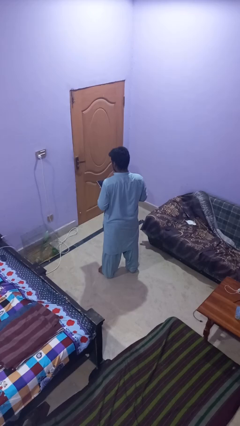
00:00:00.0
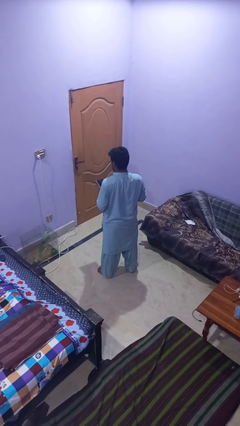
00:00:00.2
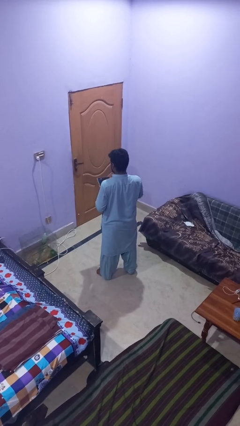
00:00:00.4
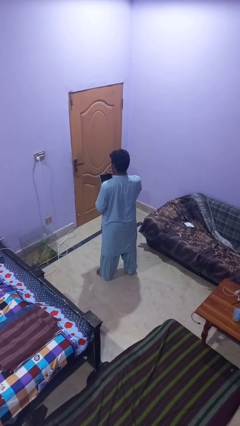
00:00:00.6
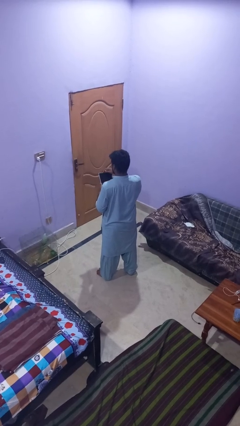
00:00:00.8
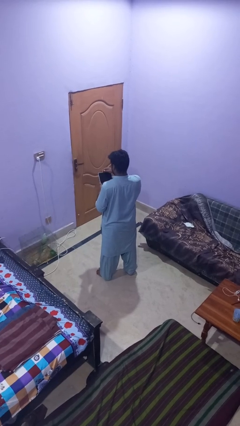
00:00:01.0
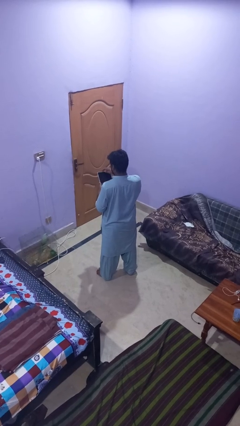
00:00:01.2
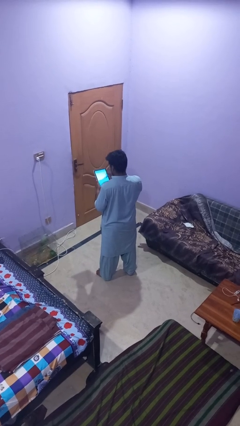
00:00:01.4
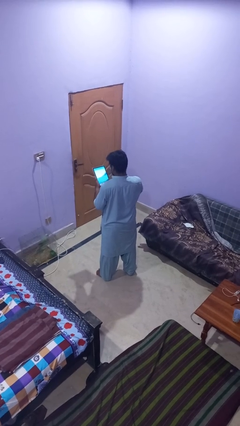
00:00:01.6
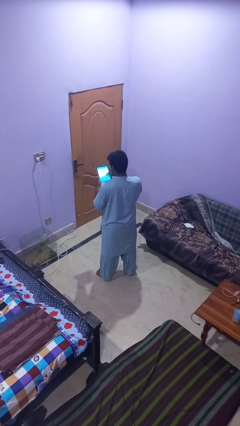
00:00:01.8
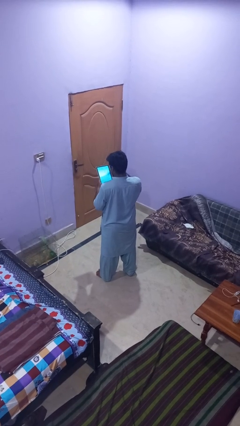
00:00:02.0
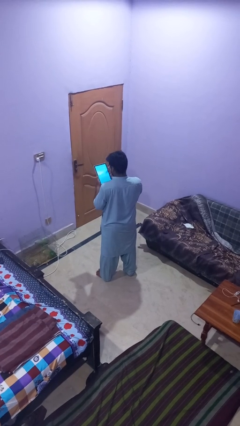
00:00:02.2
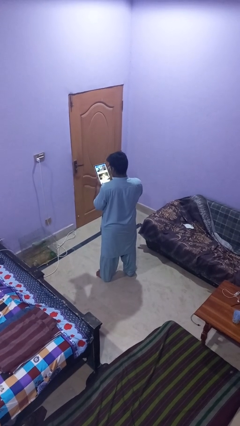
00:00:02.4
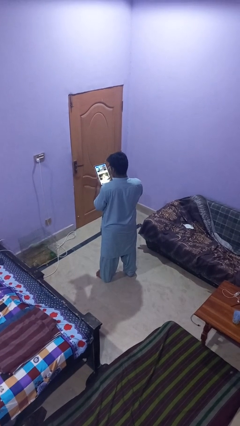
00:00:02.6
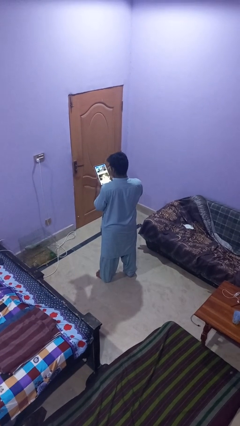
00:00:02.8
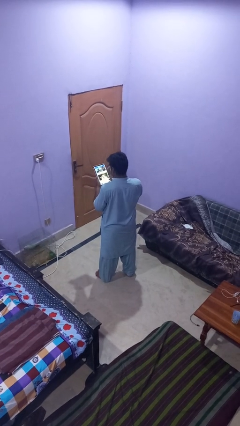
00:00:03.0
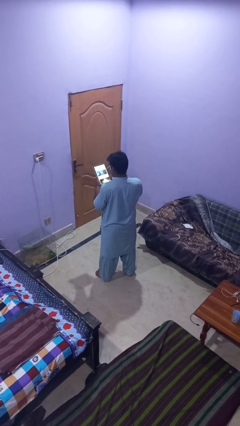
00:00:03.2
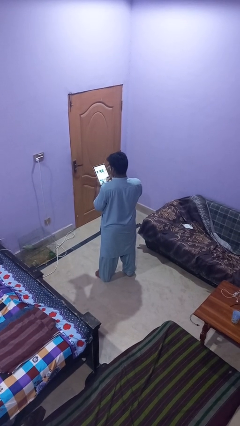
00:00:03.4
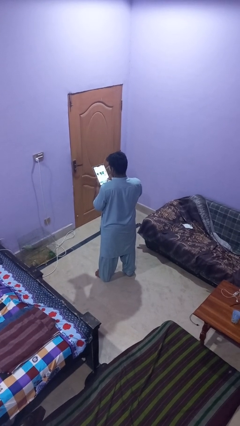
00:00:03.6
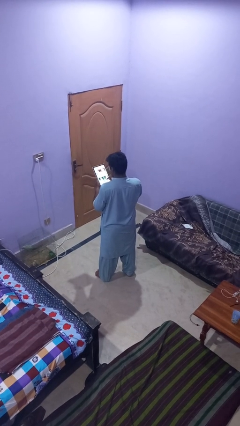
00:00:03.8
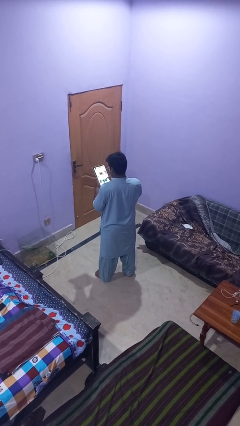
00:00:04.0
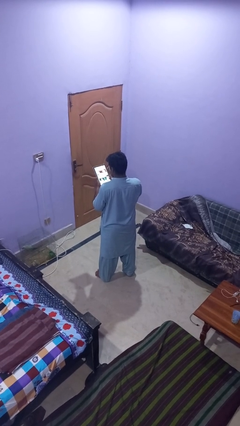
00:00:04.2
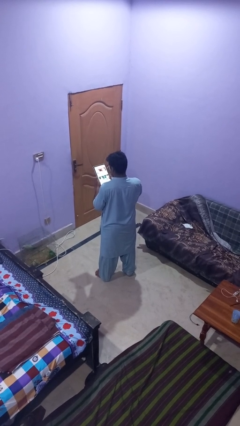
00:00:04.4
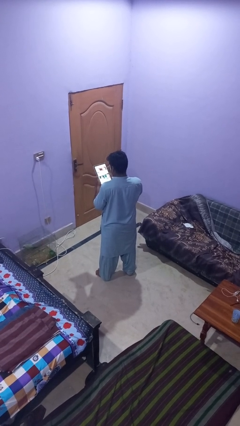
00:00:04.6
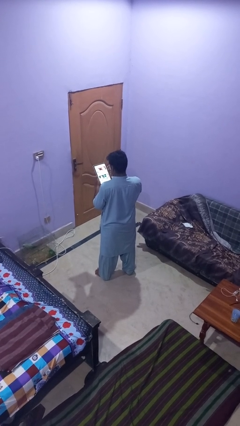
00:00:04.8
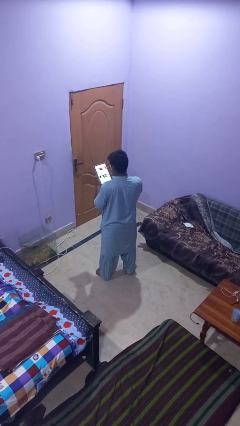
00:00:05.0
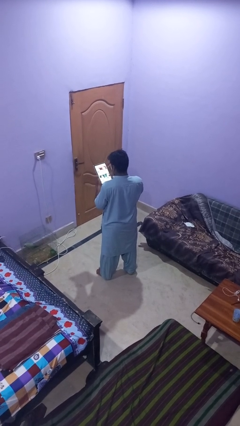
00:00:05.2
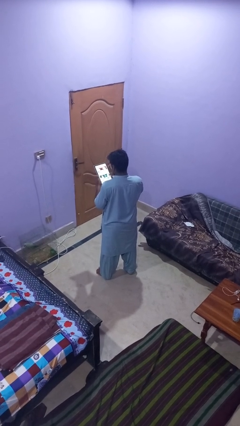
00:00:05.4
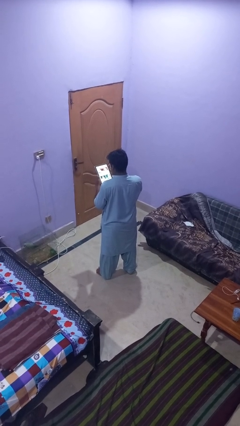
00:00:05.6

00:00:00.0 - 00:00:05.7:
person interacts with tablet

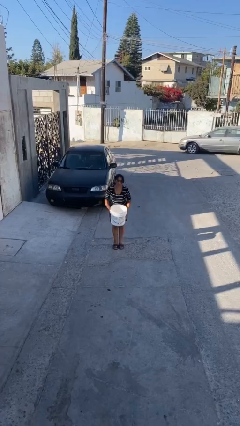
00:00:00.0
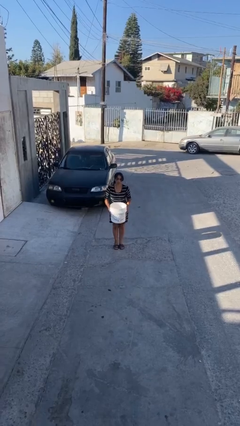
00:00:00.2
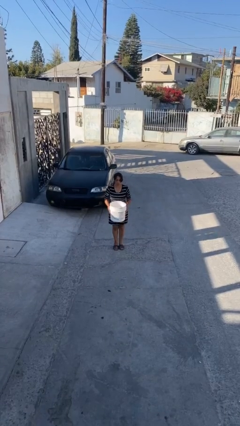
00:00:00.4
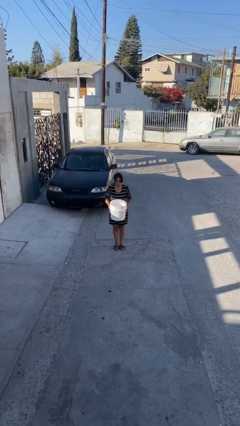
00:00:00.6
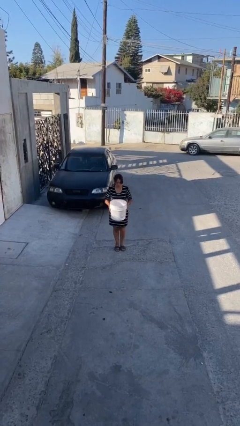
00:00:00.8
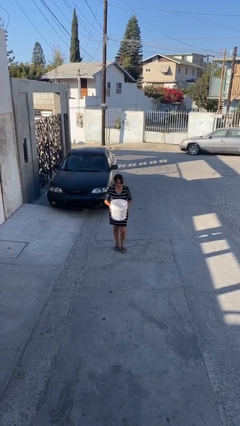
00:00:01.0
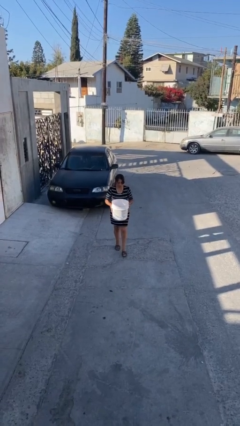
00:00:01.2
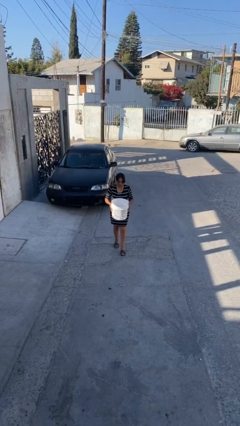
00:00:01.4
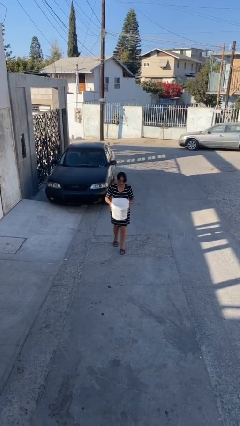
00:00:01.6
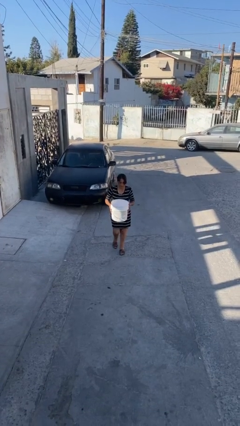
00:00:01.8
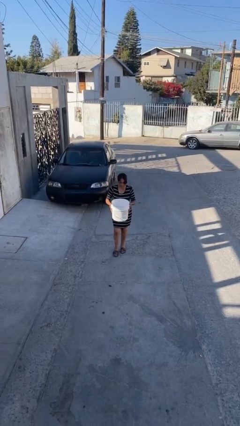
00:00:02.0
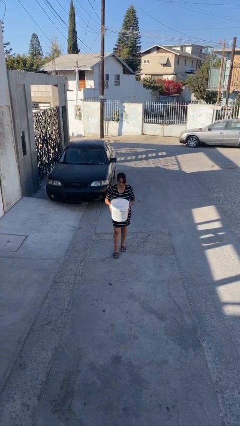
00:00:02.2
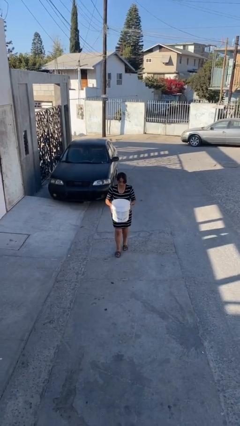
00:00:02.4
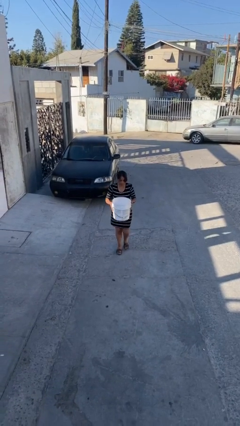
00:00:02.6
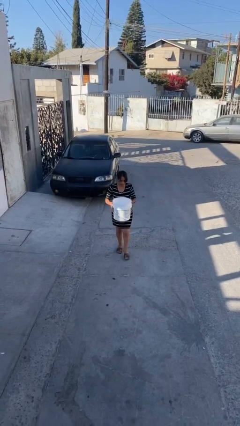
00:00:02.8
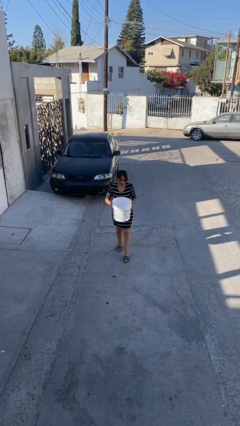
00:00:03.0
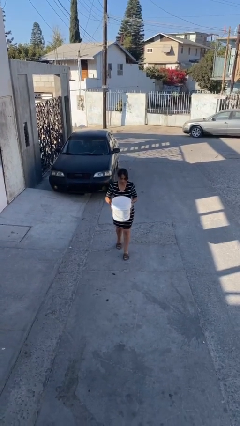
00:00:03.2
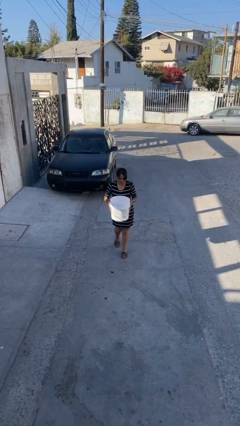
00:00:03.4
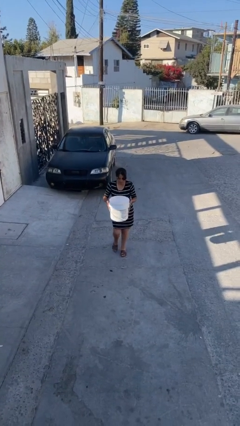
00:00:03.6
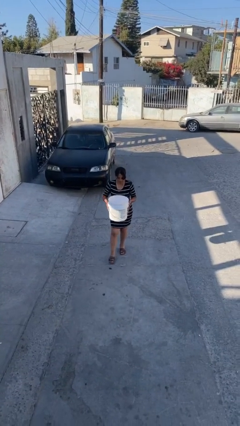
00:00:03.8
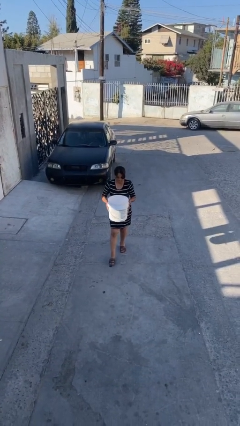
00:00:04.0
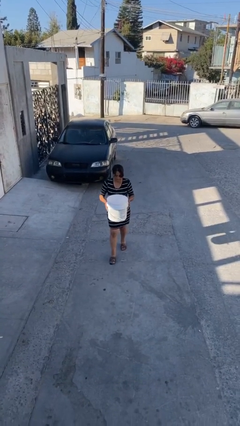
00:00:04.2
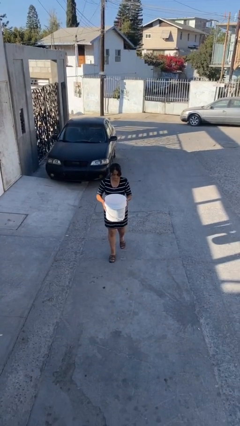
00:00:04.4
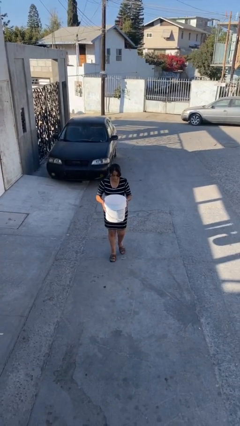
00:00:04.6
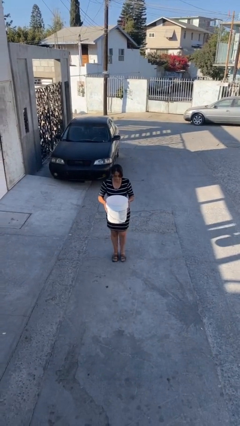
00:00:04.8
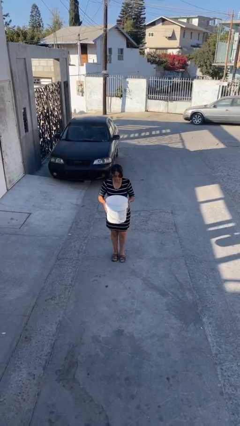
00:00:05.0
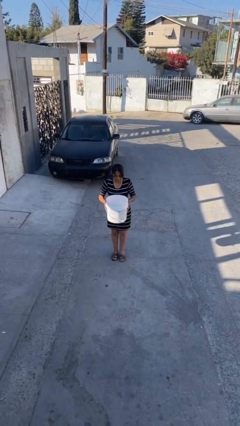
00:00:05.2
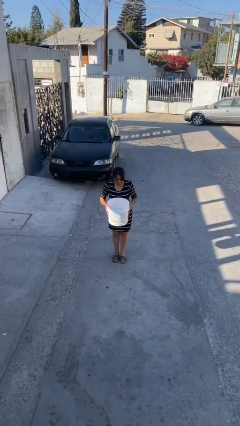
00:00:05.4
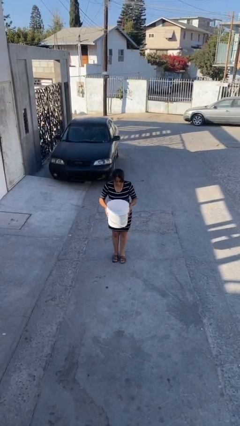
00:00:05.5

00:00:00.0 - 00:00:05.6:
person carries heavy object

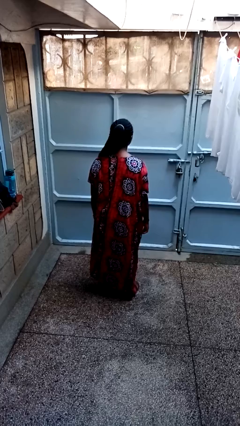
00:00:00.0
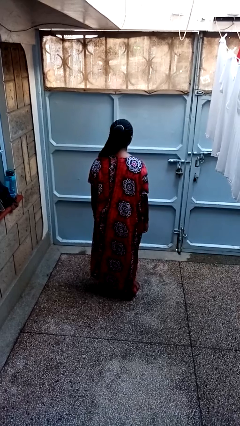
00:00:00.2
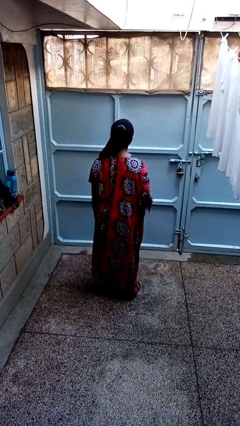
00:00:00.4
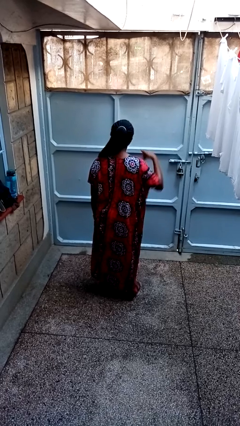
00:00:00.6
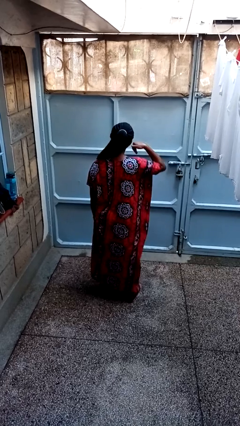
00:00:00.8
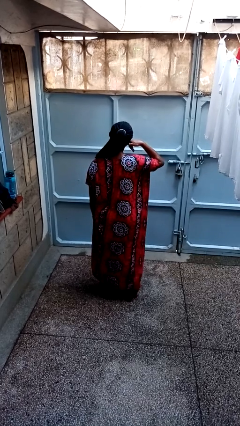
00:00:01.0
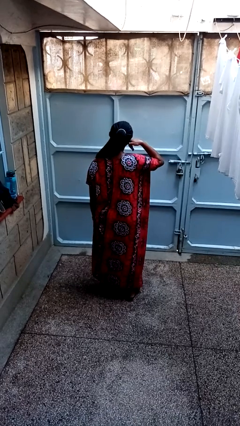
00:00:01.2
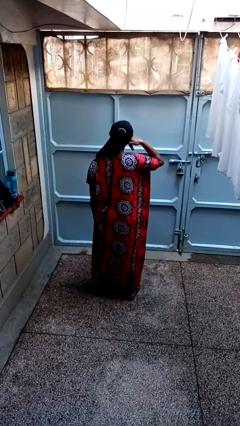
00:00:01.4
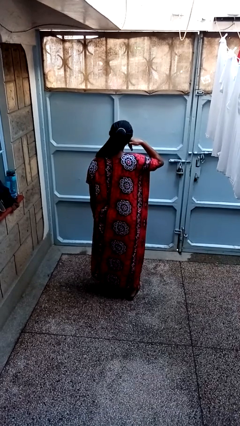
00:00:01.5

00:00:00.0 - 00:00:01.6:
person gestures call me

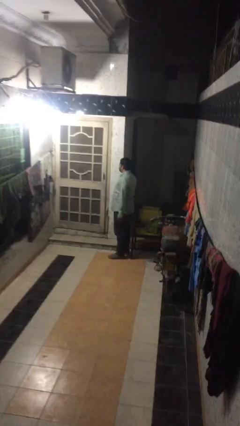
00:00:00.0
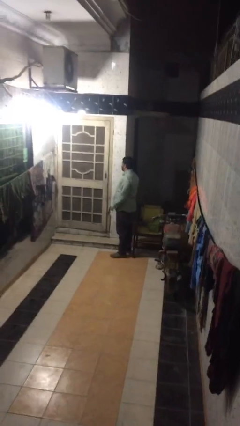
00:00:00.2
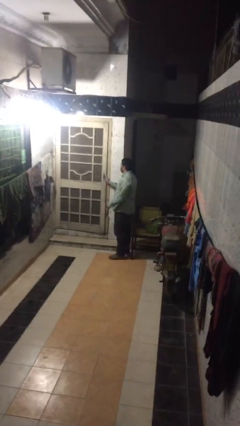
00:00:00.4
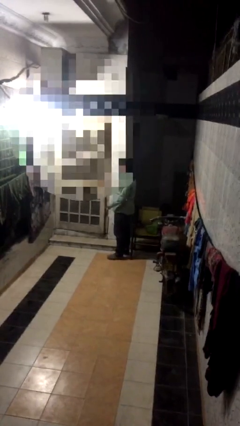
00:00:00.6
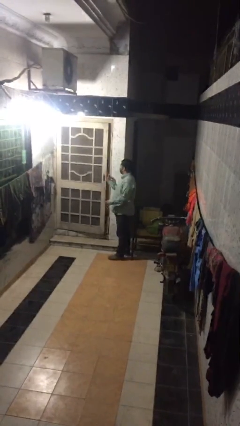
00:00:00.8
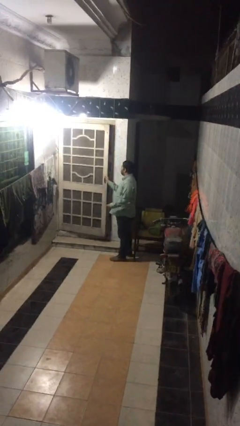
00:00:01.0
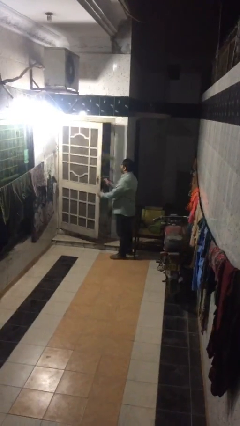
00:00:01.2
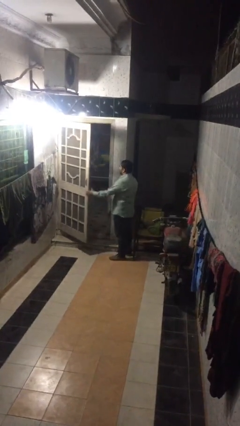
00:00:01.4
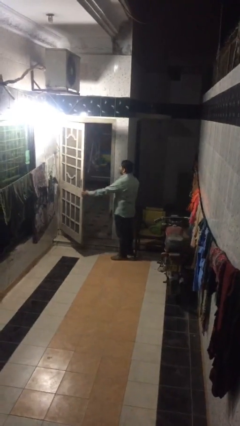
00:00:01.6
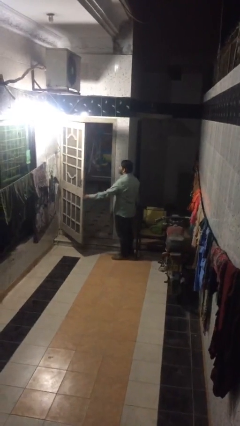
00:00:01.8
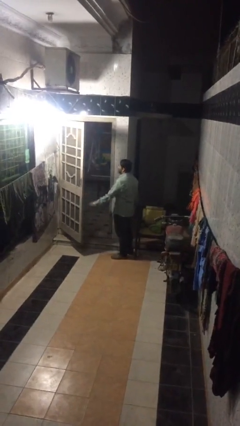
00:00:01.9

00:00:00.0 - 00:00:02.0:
person opens facility door

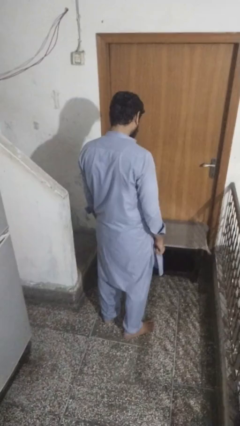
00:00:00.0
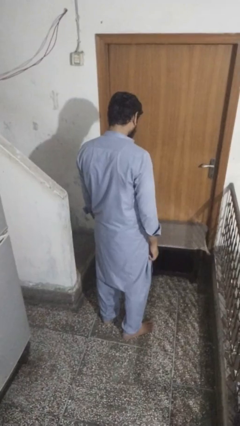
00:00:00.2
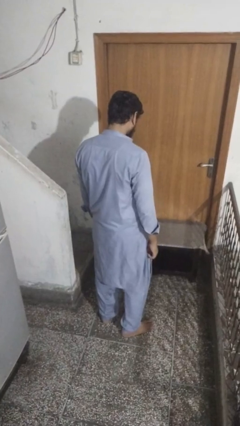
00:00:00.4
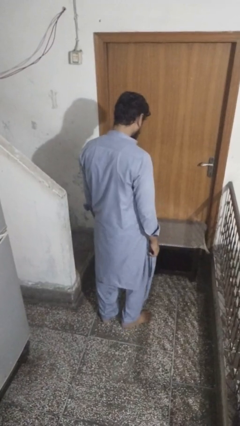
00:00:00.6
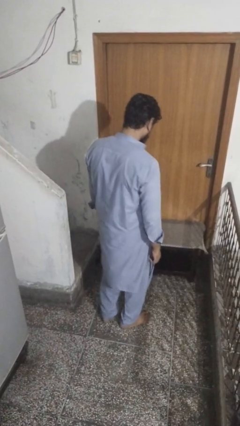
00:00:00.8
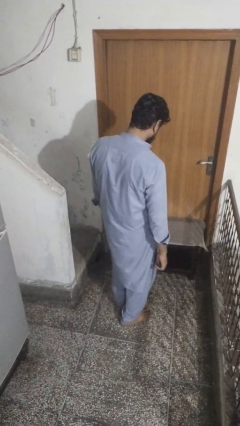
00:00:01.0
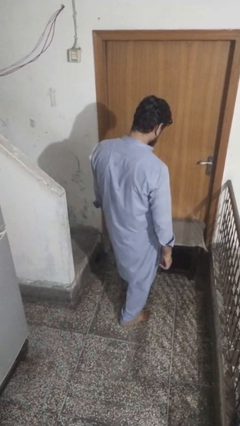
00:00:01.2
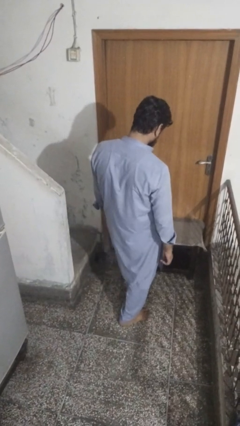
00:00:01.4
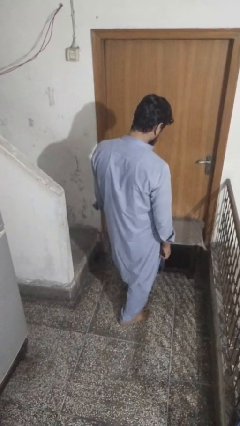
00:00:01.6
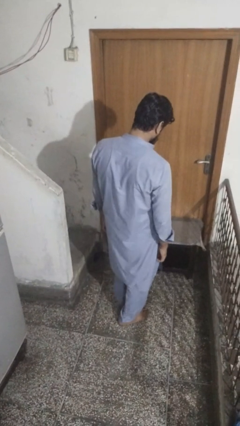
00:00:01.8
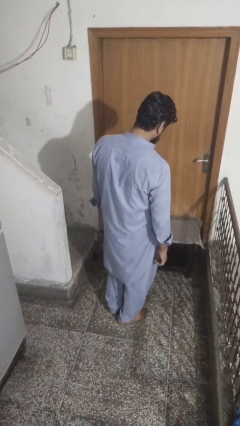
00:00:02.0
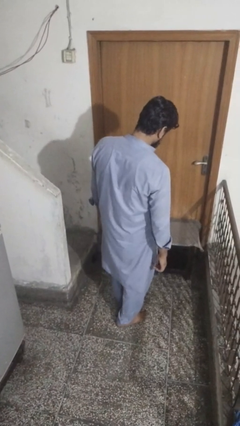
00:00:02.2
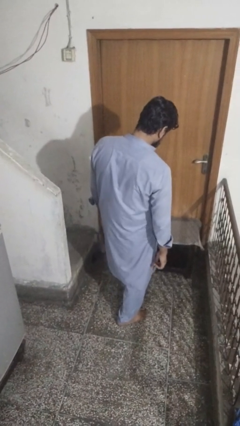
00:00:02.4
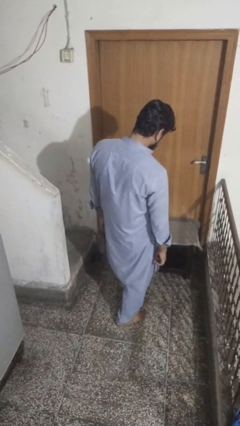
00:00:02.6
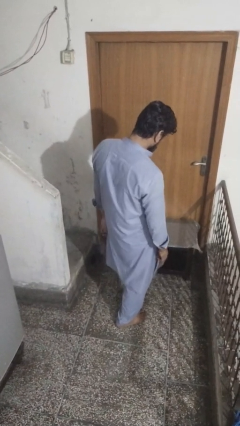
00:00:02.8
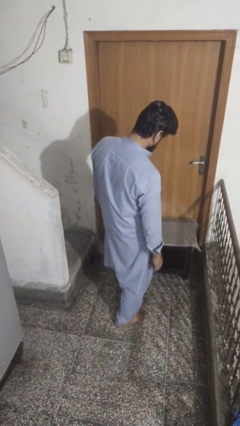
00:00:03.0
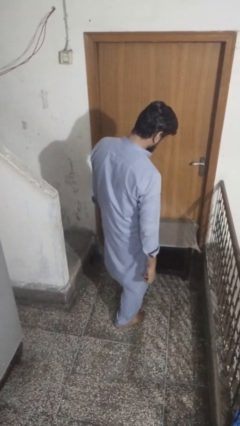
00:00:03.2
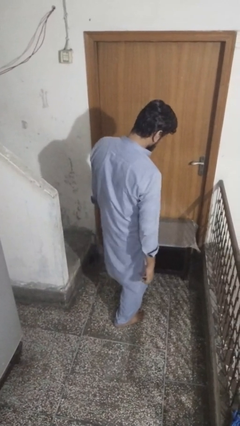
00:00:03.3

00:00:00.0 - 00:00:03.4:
person stubs toe
